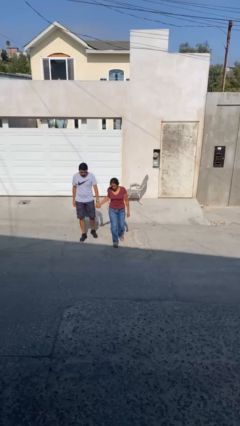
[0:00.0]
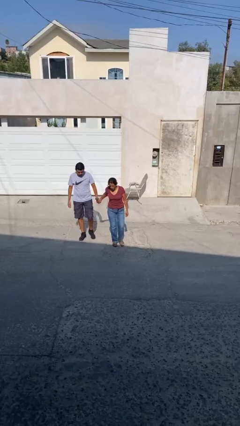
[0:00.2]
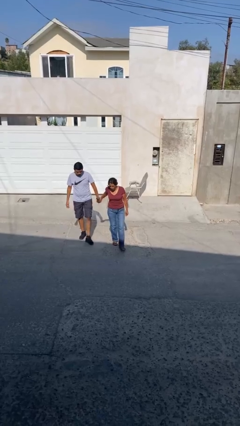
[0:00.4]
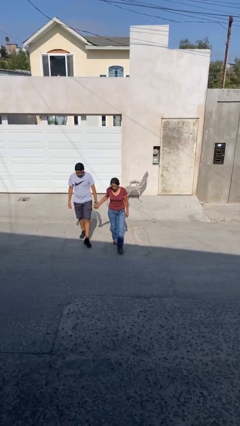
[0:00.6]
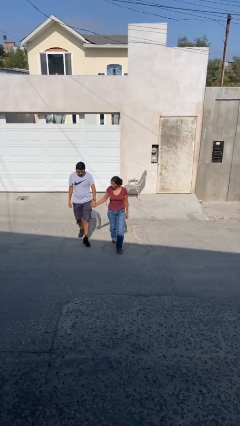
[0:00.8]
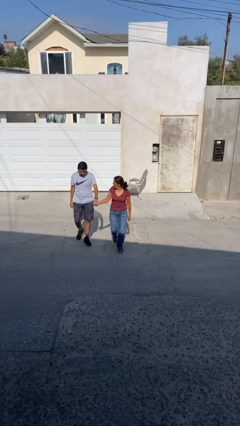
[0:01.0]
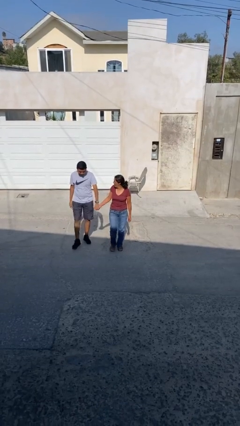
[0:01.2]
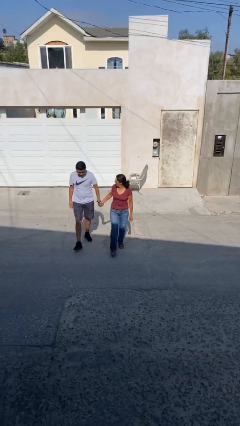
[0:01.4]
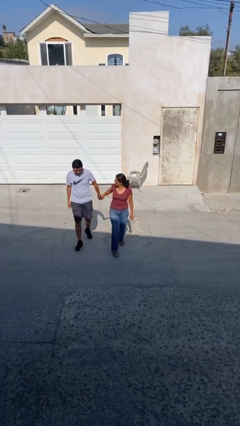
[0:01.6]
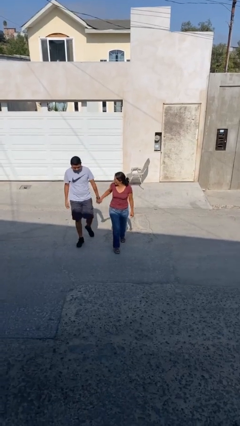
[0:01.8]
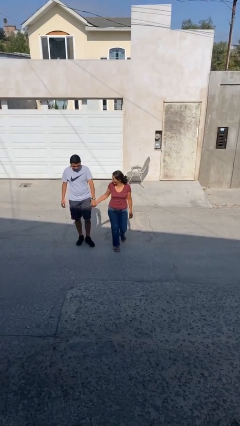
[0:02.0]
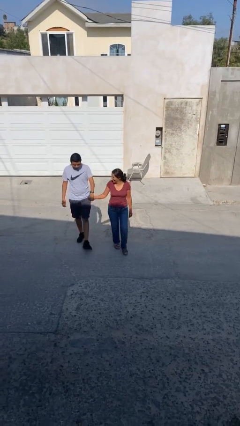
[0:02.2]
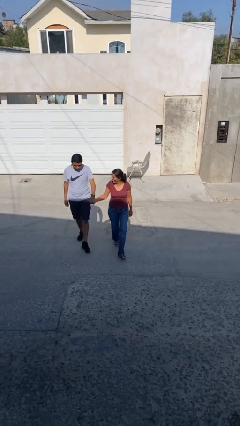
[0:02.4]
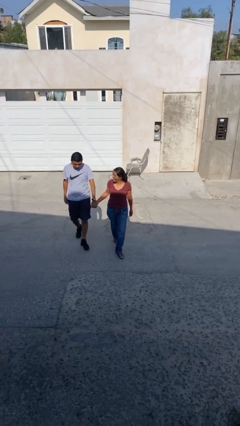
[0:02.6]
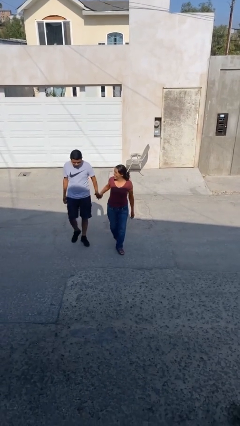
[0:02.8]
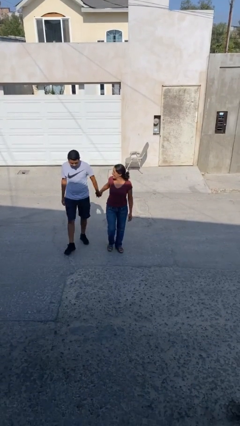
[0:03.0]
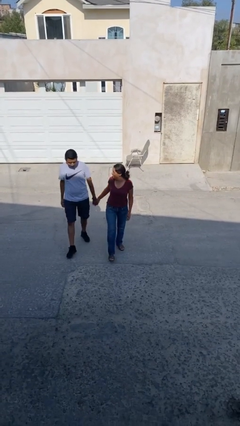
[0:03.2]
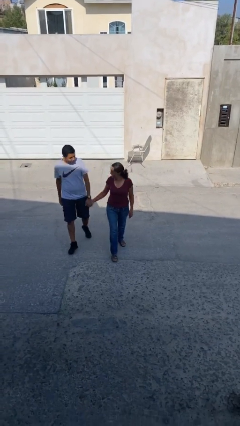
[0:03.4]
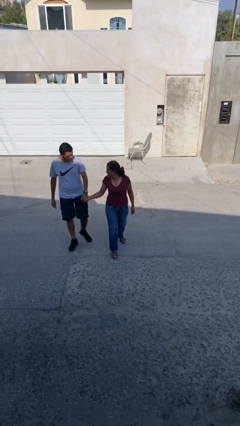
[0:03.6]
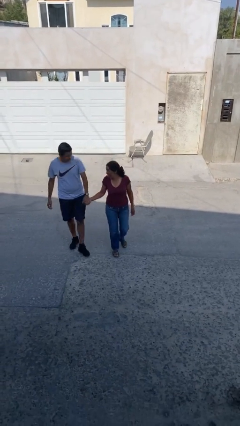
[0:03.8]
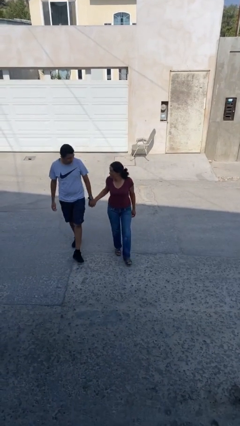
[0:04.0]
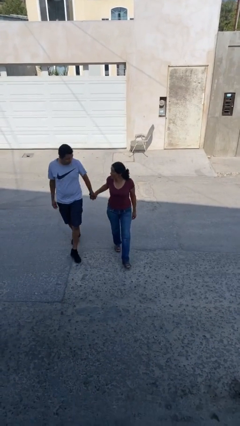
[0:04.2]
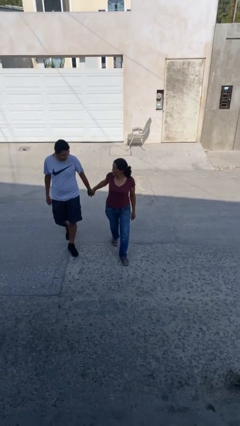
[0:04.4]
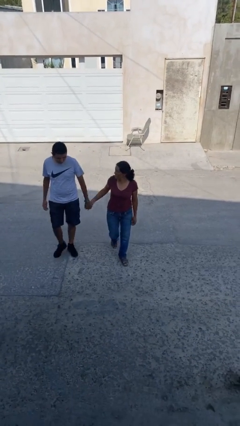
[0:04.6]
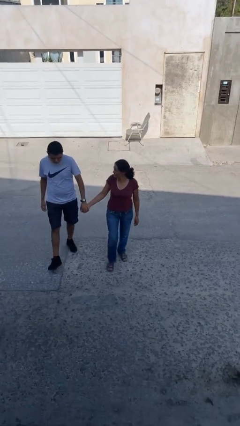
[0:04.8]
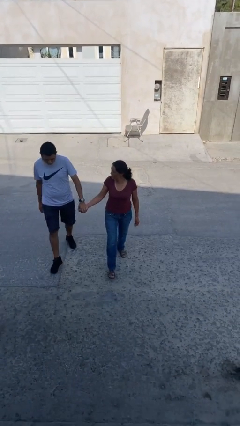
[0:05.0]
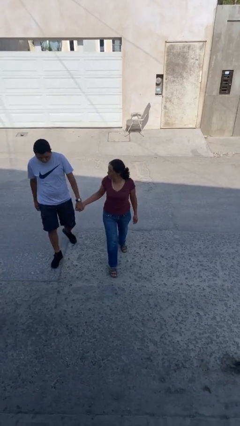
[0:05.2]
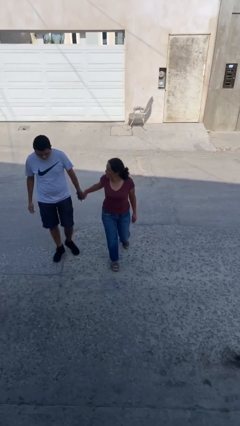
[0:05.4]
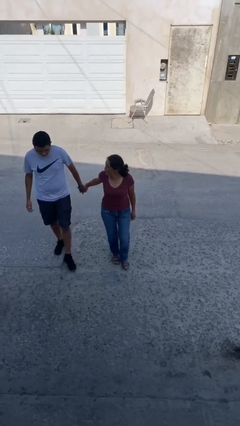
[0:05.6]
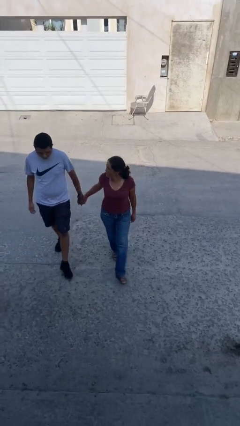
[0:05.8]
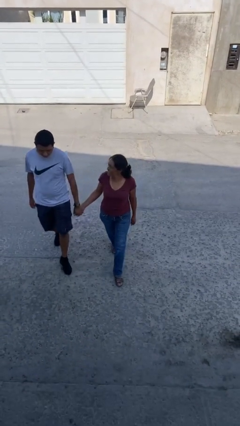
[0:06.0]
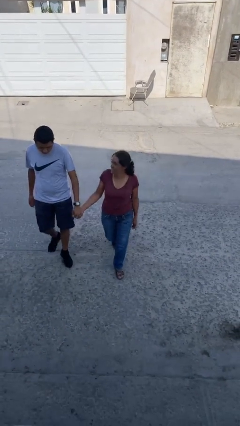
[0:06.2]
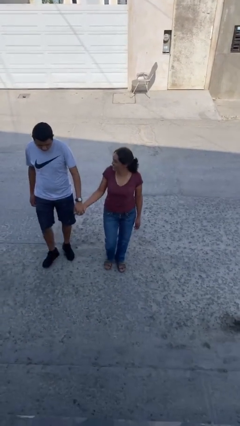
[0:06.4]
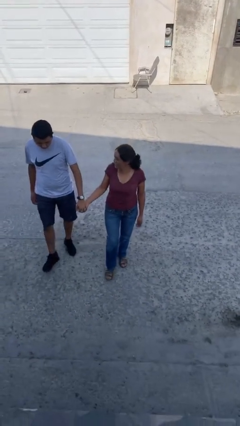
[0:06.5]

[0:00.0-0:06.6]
person holds hand

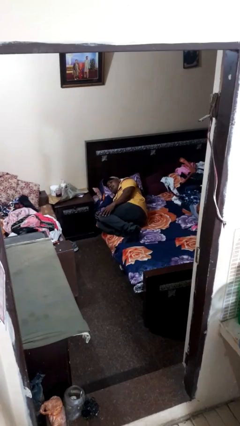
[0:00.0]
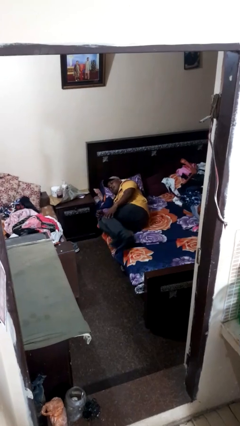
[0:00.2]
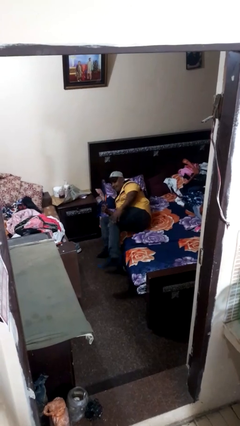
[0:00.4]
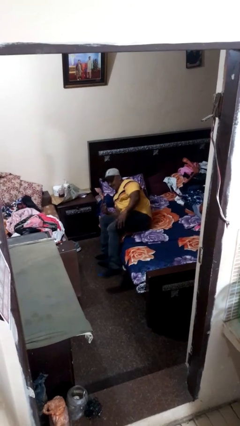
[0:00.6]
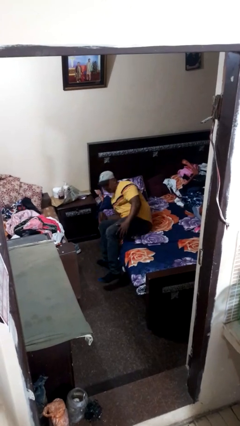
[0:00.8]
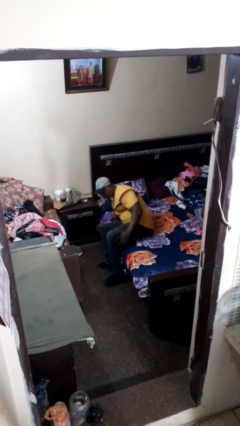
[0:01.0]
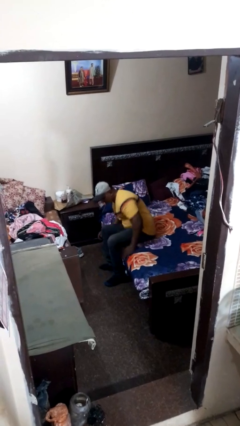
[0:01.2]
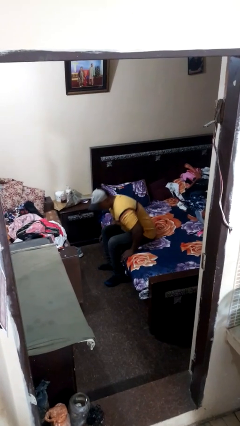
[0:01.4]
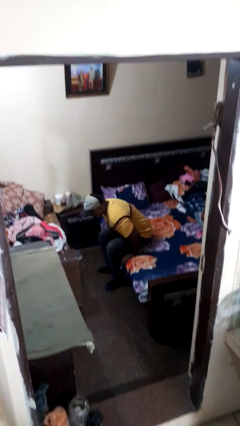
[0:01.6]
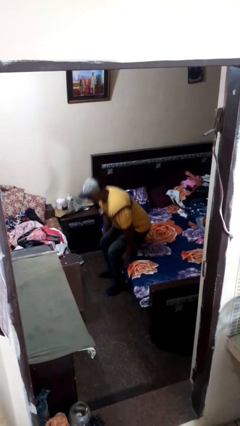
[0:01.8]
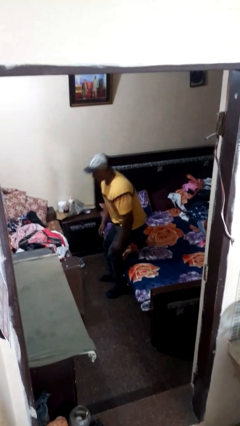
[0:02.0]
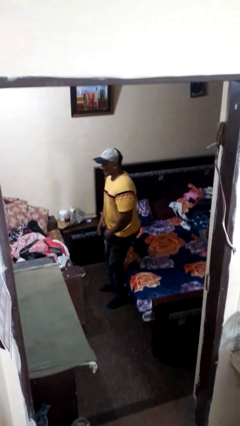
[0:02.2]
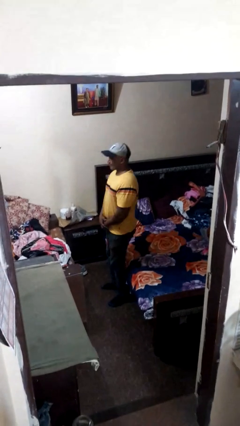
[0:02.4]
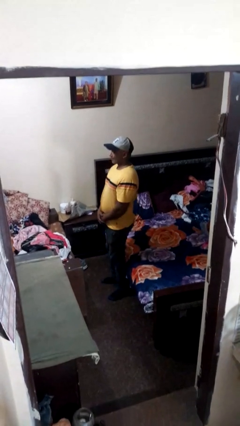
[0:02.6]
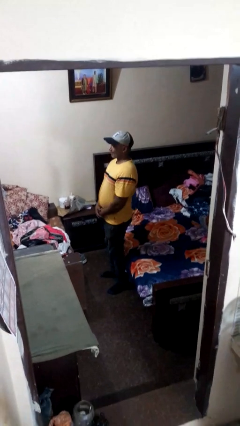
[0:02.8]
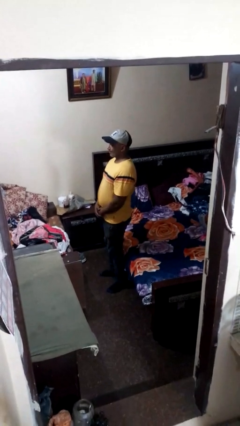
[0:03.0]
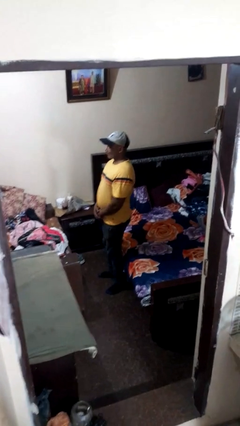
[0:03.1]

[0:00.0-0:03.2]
person stands up

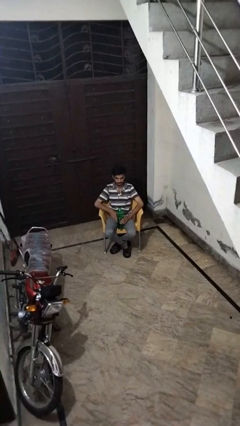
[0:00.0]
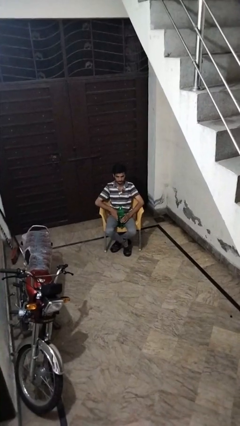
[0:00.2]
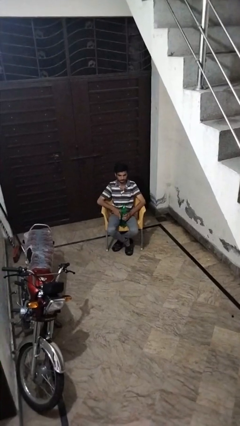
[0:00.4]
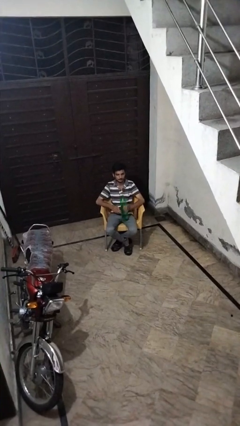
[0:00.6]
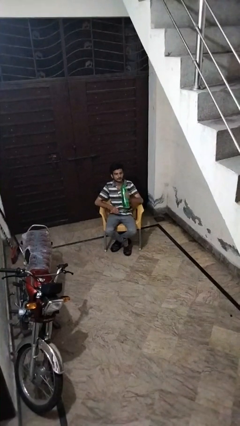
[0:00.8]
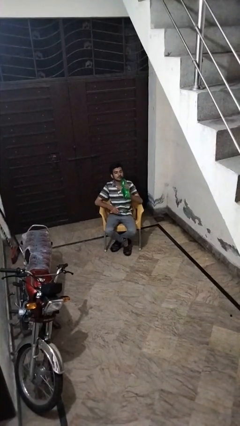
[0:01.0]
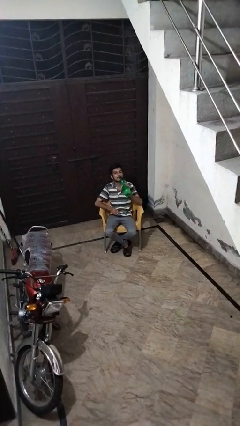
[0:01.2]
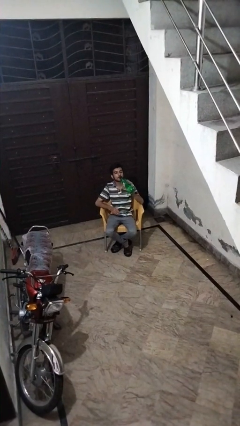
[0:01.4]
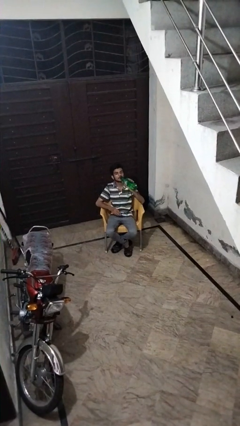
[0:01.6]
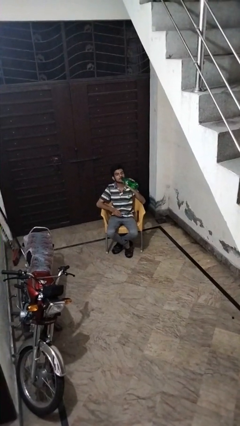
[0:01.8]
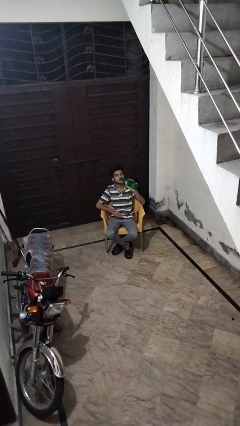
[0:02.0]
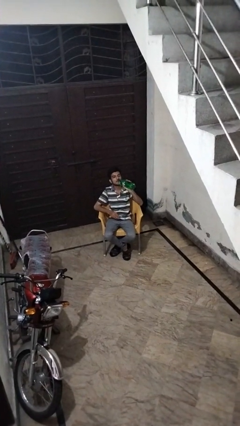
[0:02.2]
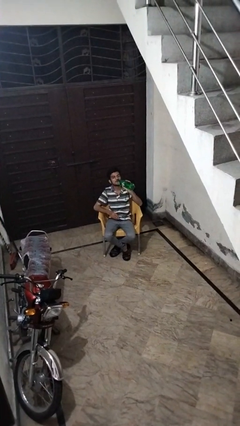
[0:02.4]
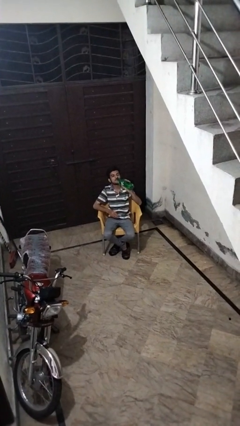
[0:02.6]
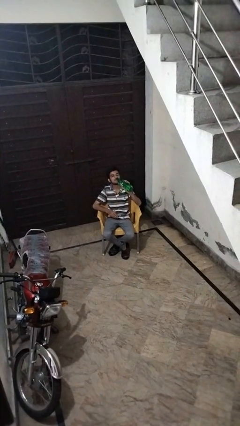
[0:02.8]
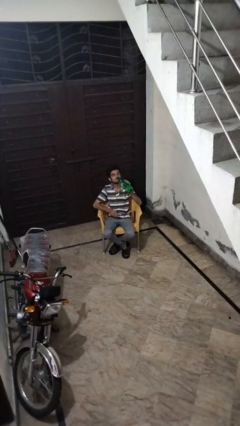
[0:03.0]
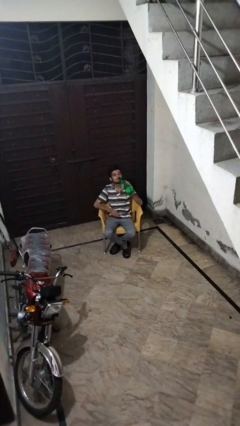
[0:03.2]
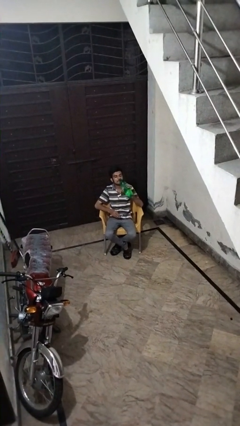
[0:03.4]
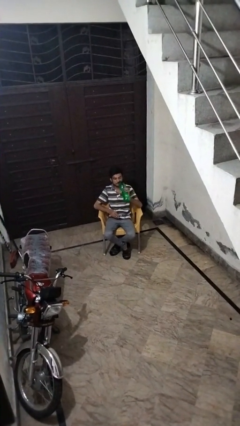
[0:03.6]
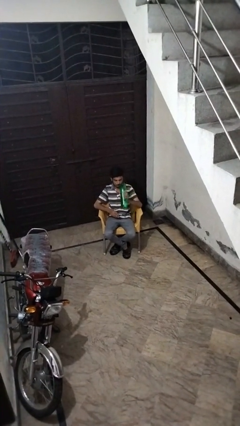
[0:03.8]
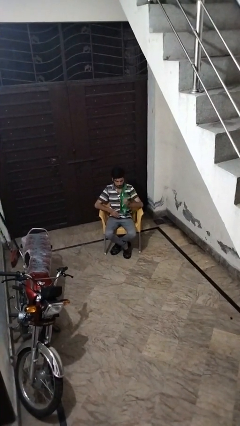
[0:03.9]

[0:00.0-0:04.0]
person drinks from bottle

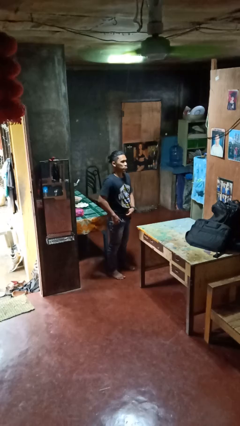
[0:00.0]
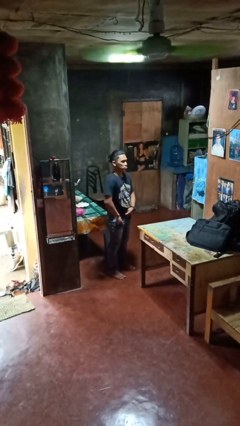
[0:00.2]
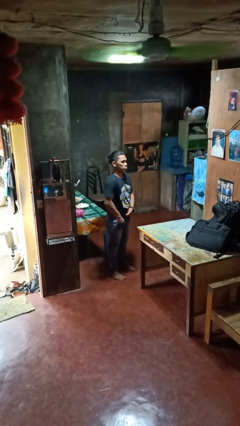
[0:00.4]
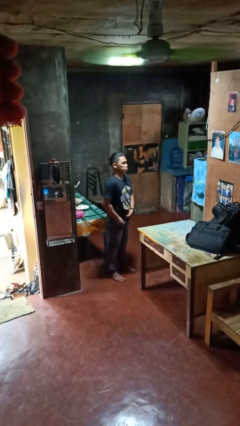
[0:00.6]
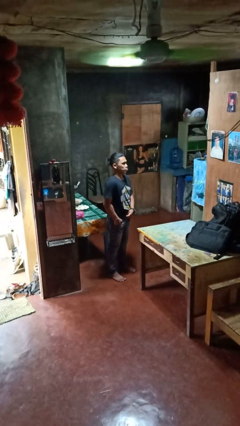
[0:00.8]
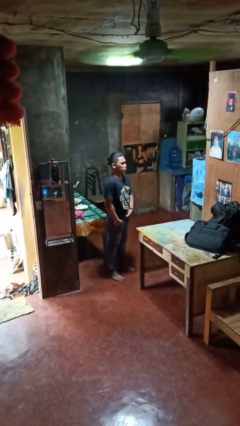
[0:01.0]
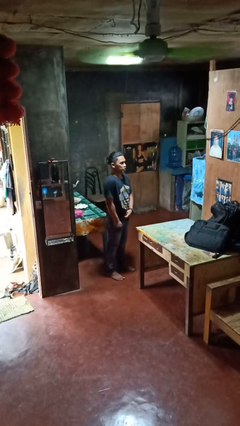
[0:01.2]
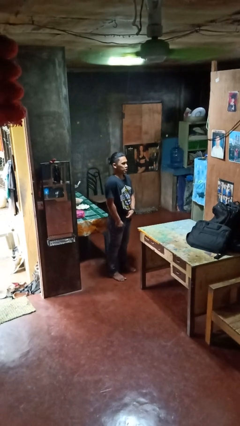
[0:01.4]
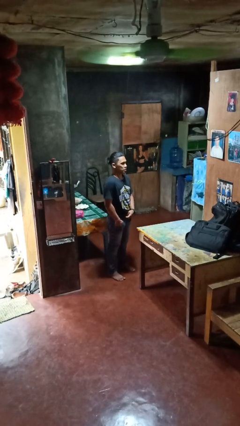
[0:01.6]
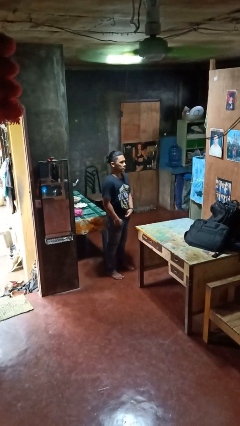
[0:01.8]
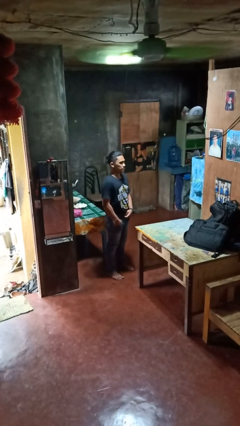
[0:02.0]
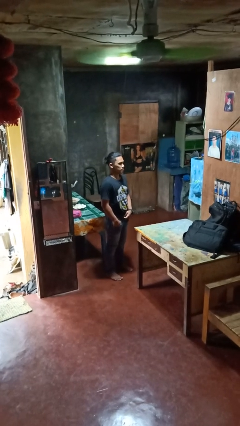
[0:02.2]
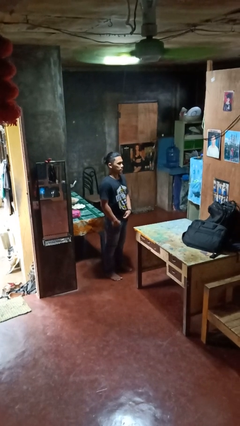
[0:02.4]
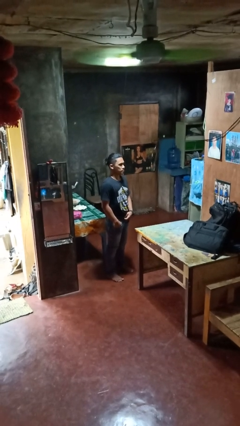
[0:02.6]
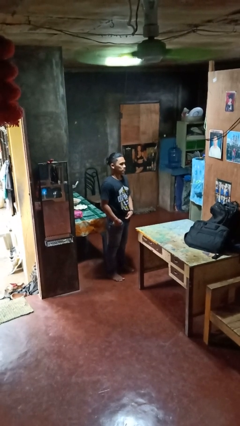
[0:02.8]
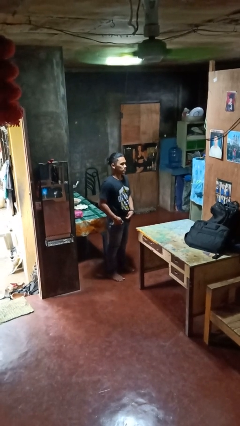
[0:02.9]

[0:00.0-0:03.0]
person puts hands in back pockets

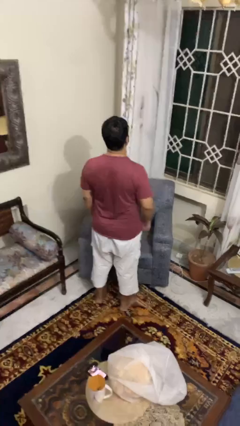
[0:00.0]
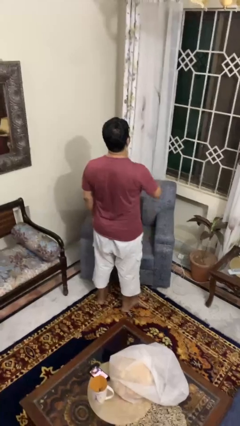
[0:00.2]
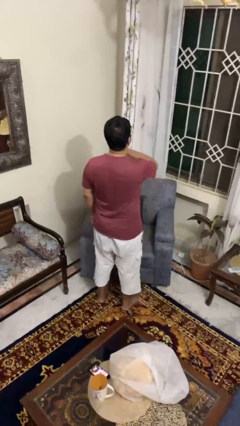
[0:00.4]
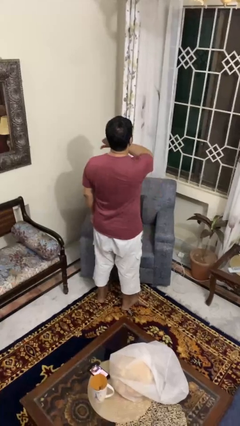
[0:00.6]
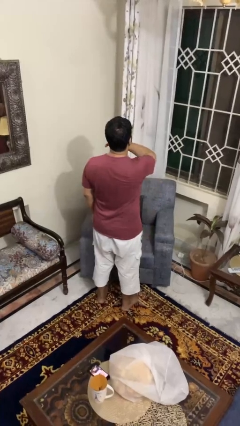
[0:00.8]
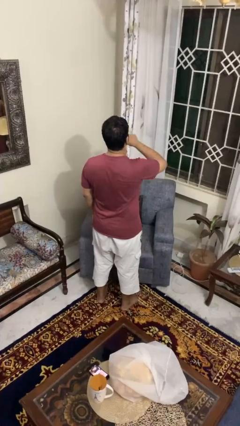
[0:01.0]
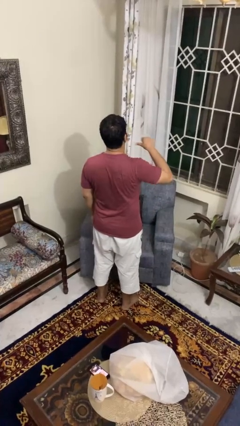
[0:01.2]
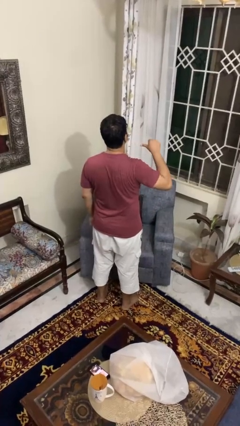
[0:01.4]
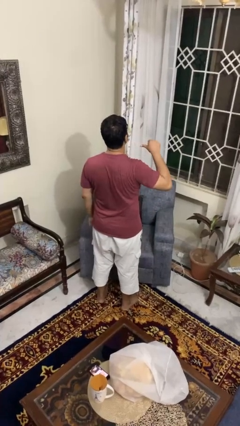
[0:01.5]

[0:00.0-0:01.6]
person gestures cut
